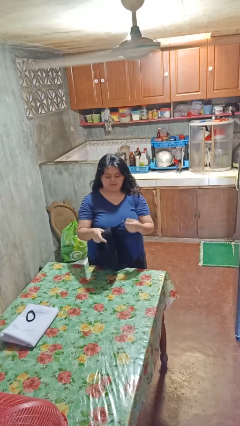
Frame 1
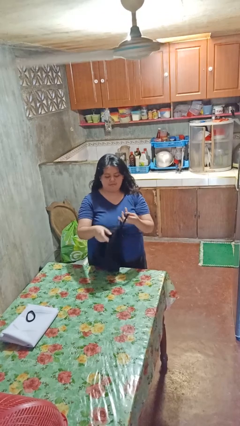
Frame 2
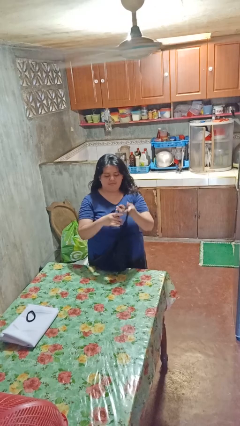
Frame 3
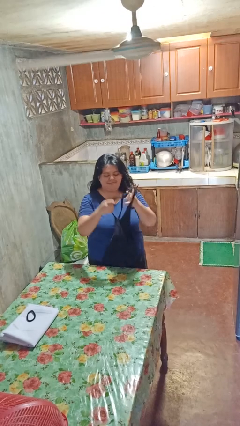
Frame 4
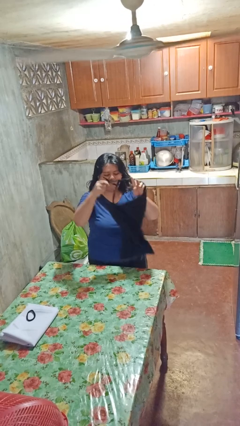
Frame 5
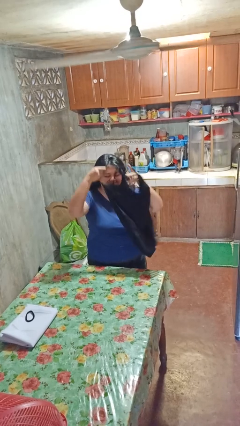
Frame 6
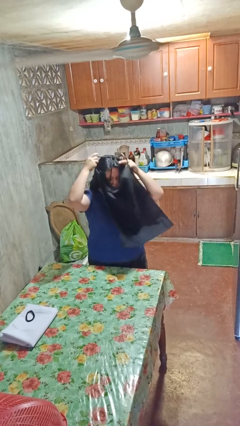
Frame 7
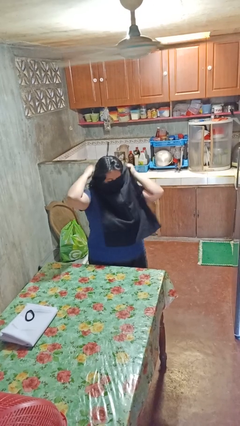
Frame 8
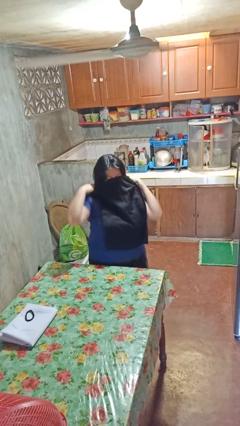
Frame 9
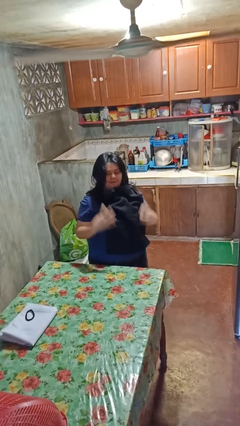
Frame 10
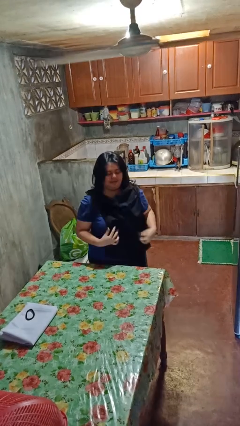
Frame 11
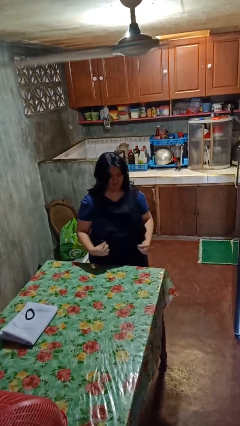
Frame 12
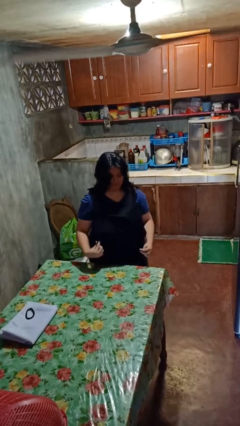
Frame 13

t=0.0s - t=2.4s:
person puts on apron

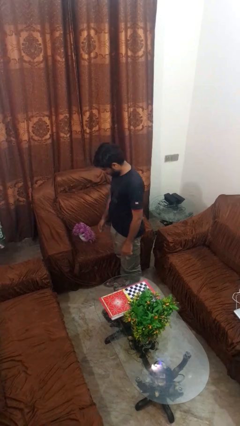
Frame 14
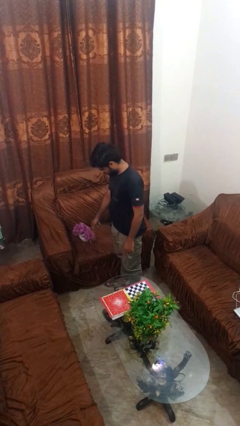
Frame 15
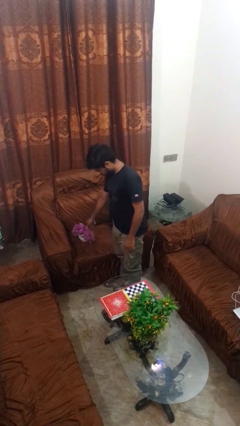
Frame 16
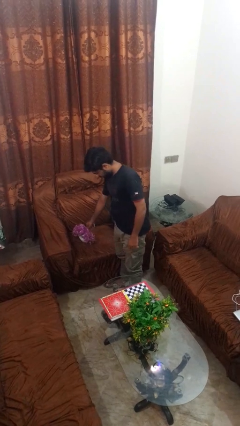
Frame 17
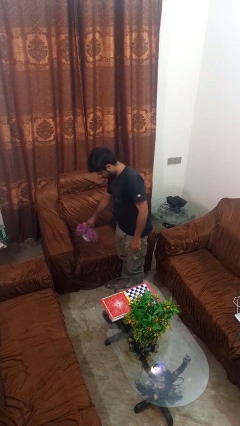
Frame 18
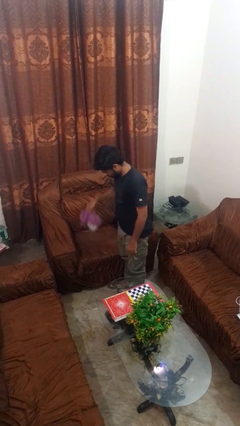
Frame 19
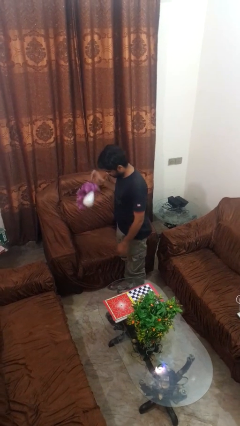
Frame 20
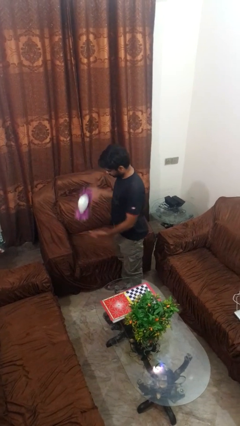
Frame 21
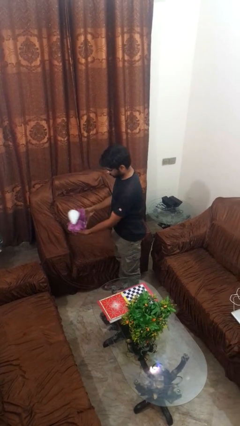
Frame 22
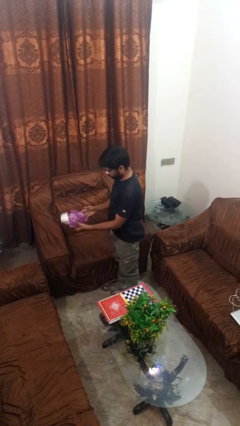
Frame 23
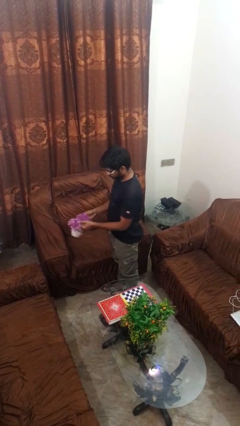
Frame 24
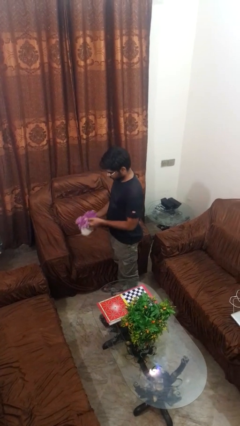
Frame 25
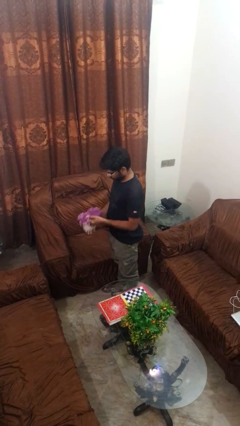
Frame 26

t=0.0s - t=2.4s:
person picks up object from couch

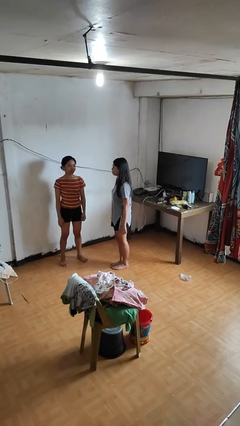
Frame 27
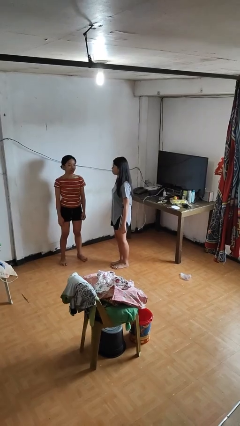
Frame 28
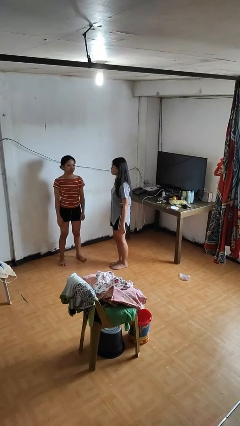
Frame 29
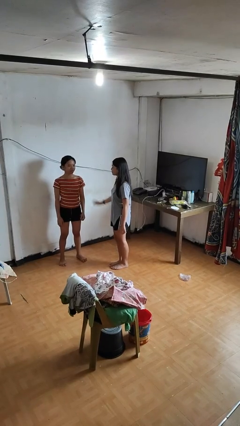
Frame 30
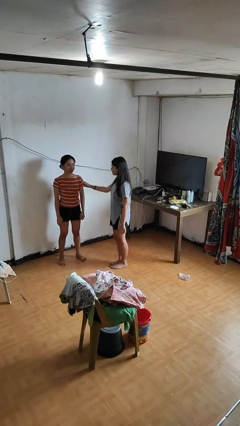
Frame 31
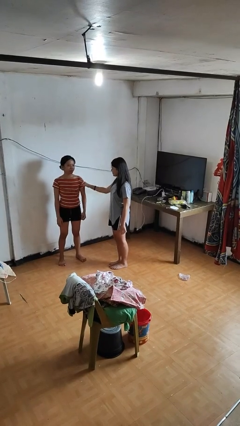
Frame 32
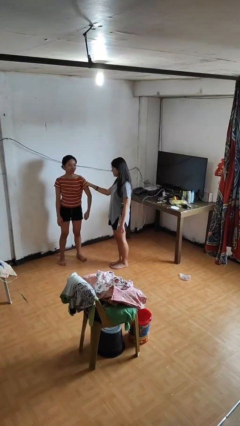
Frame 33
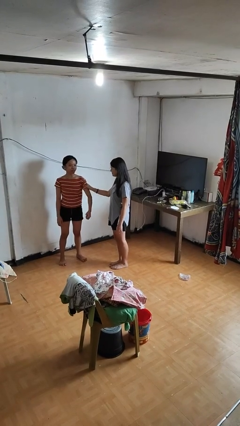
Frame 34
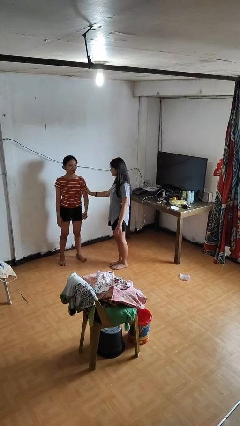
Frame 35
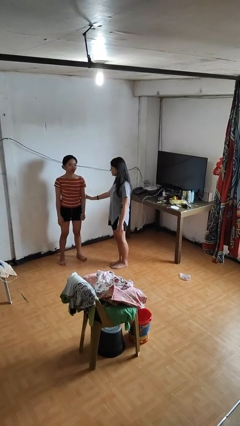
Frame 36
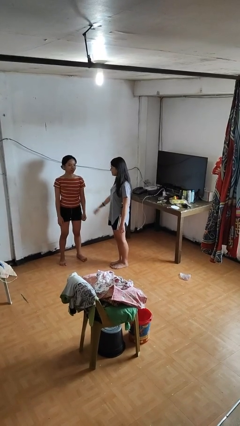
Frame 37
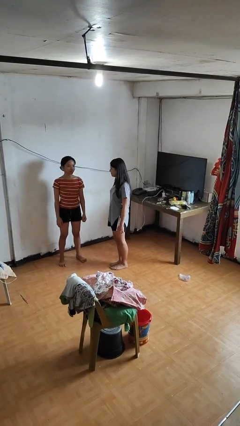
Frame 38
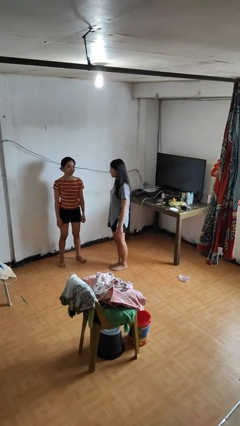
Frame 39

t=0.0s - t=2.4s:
person grabs person by bicep

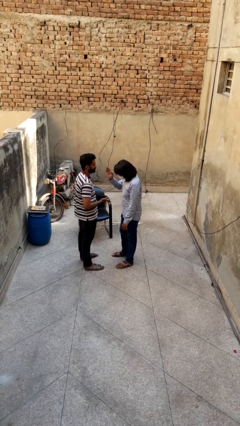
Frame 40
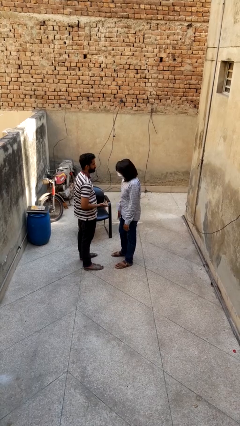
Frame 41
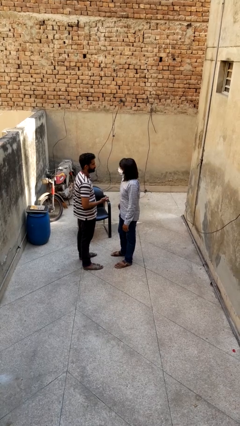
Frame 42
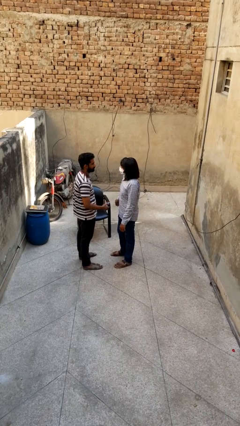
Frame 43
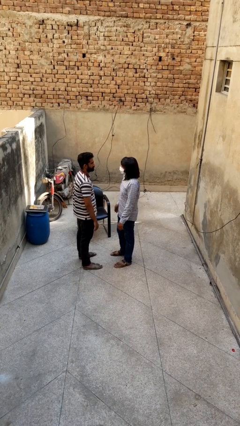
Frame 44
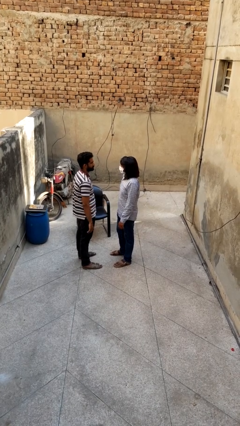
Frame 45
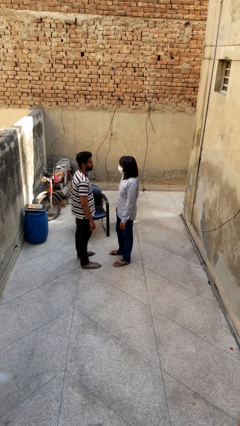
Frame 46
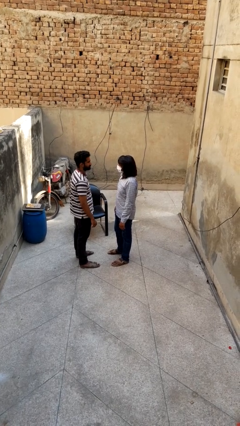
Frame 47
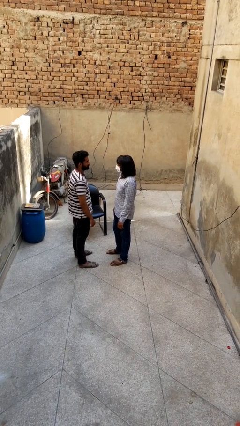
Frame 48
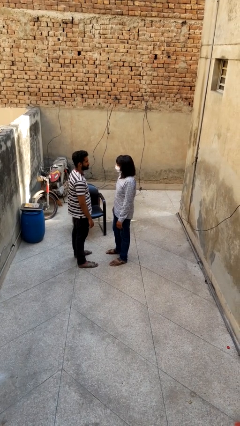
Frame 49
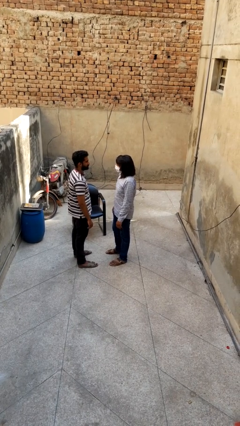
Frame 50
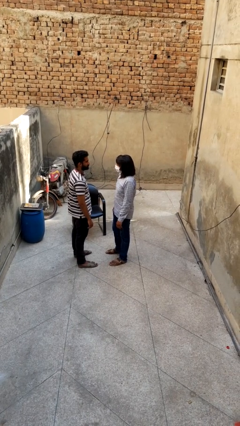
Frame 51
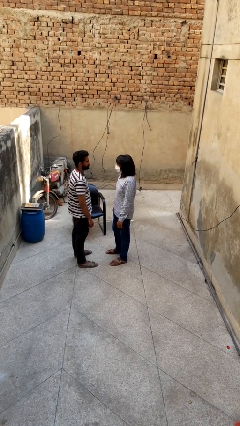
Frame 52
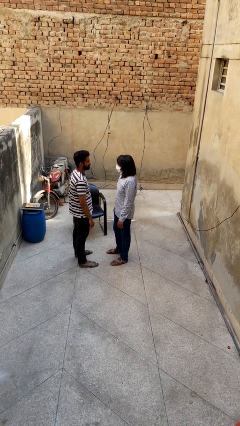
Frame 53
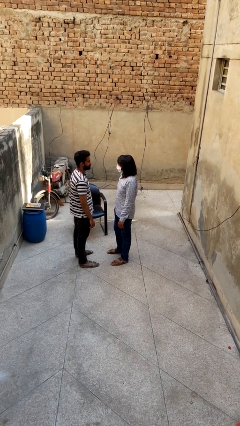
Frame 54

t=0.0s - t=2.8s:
person highfives hand

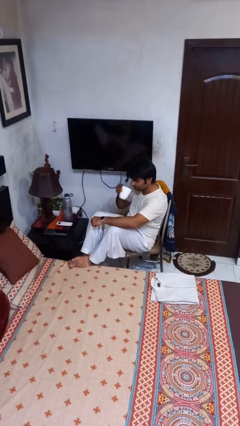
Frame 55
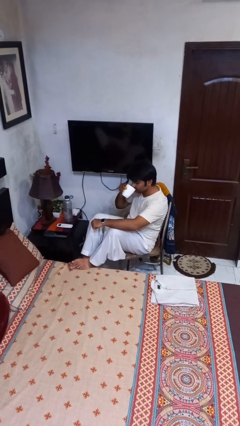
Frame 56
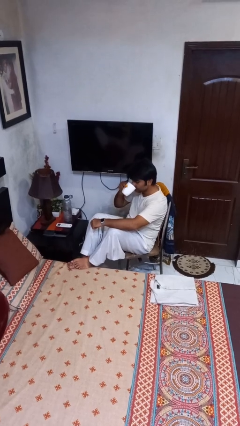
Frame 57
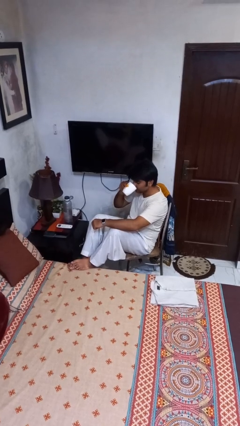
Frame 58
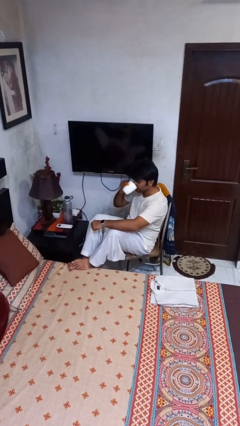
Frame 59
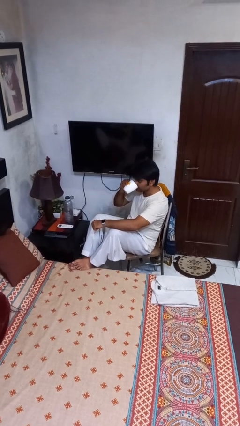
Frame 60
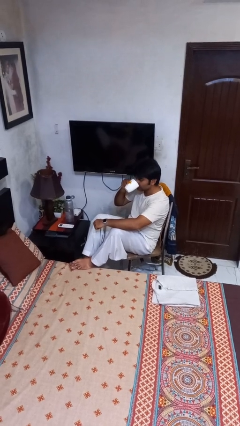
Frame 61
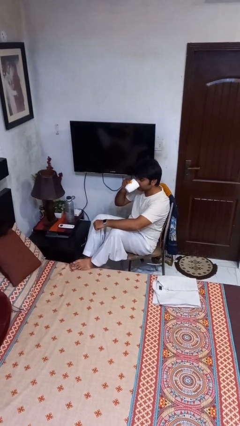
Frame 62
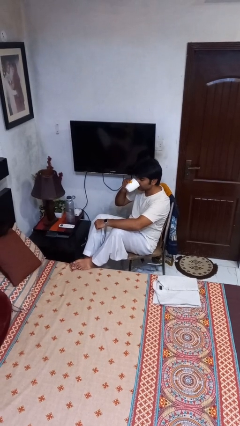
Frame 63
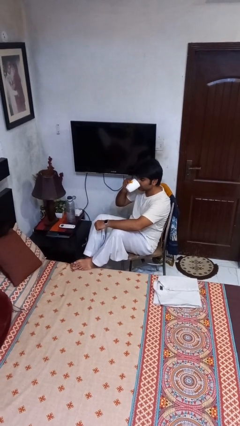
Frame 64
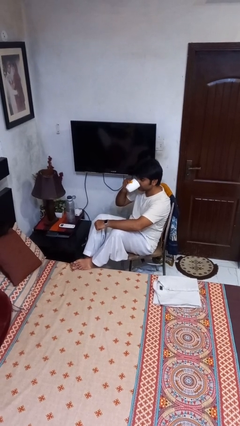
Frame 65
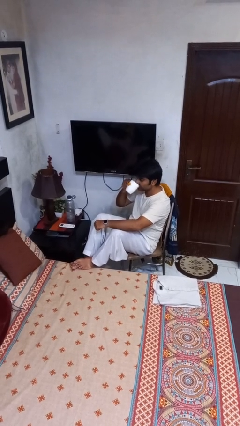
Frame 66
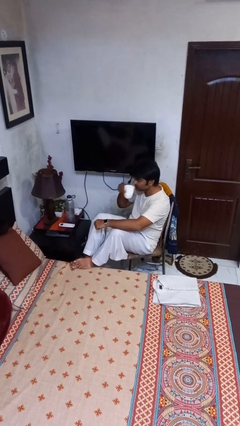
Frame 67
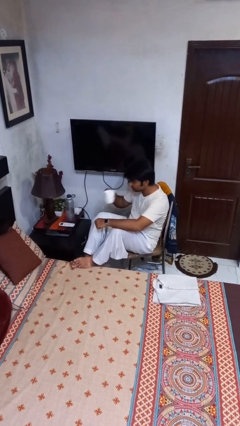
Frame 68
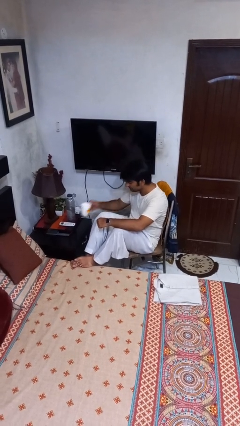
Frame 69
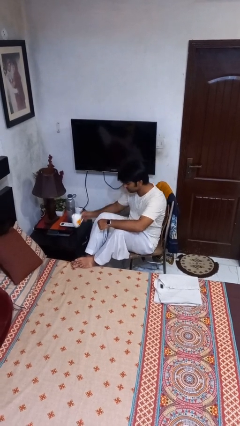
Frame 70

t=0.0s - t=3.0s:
person drinks from mug

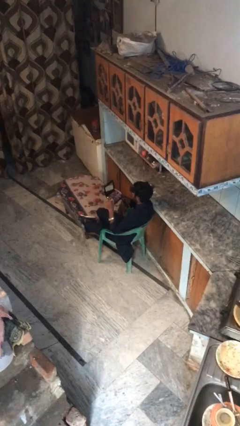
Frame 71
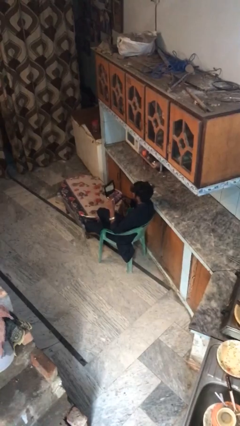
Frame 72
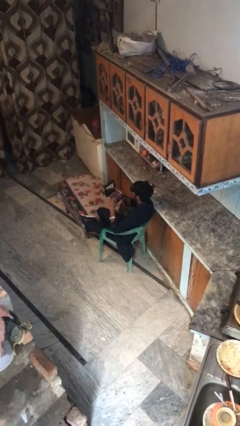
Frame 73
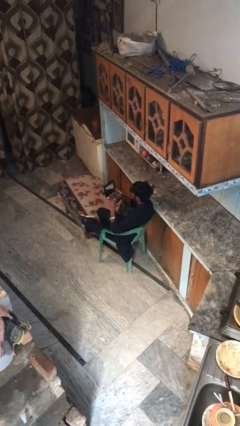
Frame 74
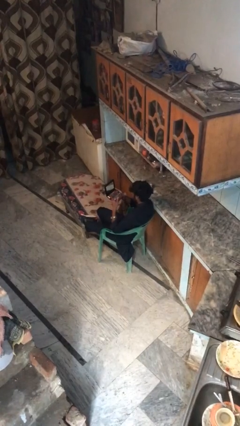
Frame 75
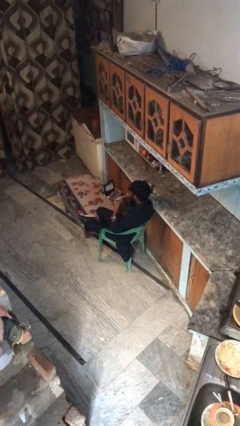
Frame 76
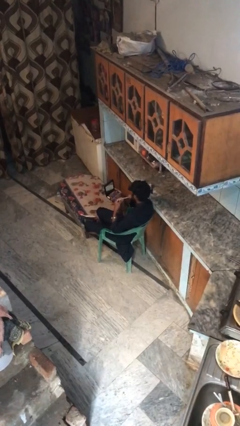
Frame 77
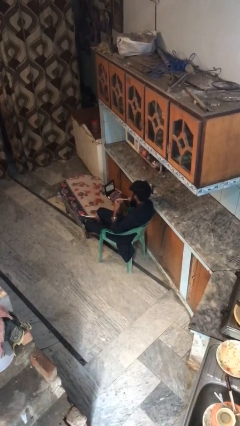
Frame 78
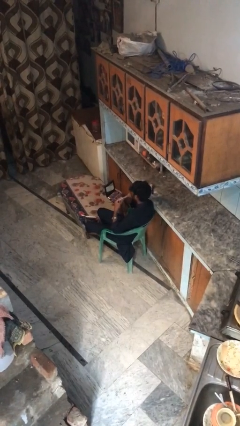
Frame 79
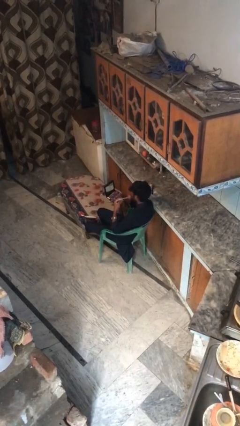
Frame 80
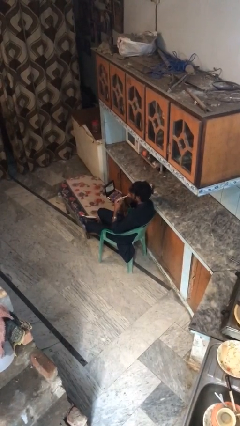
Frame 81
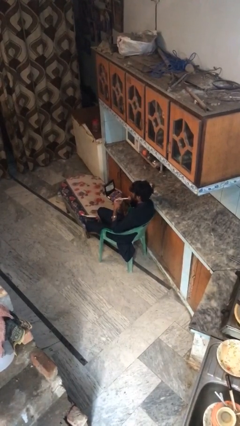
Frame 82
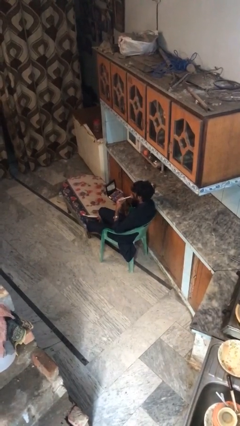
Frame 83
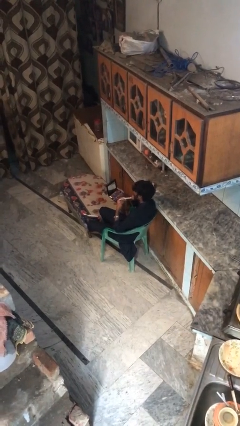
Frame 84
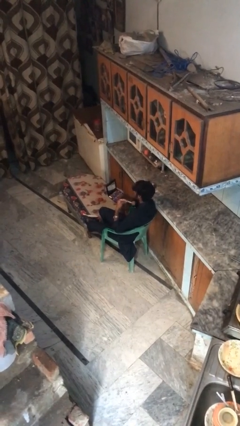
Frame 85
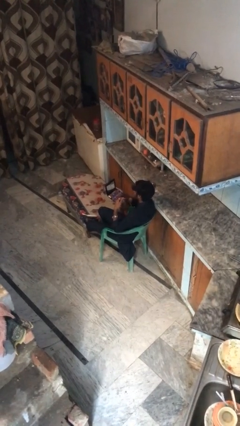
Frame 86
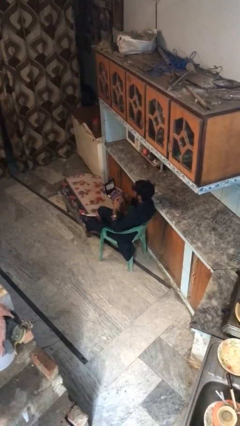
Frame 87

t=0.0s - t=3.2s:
person applies foundation makeup

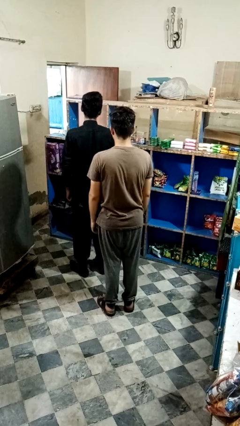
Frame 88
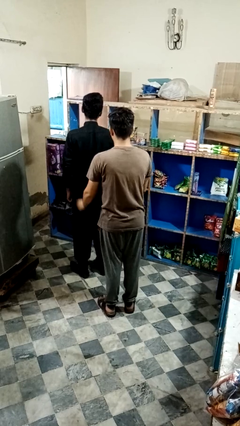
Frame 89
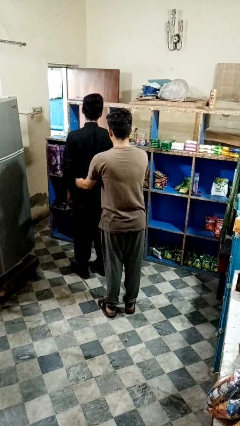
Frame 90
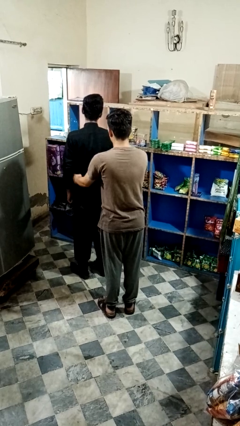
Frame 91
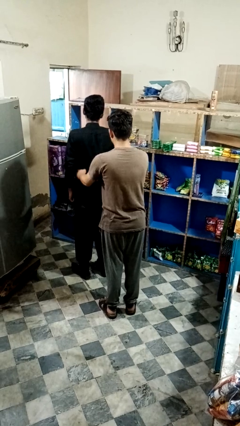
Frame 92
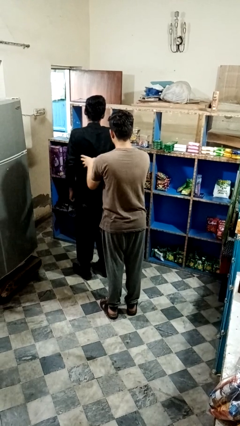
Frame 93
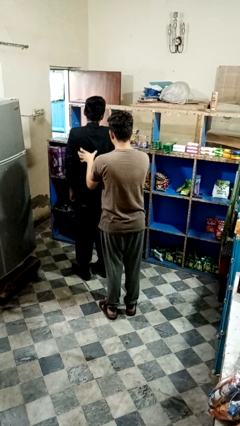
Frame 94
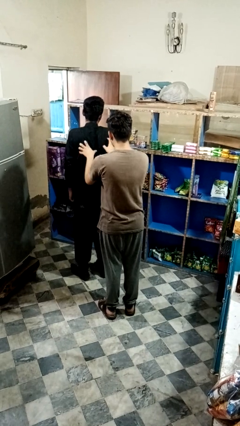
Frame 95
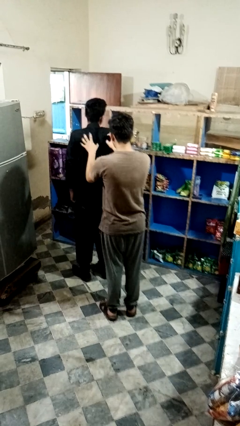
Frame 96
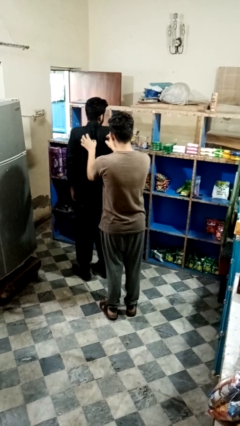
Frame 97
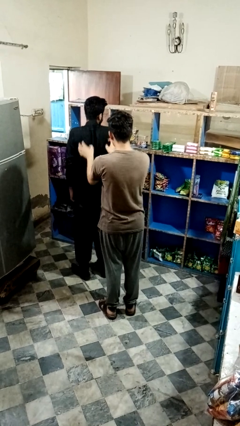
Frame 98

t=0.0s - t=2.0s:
person tickles person
